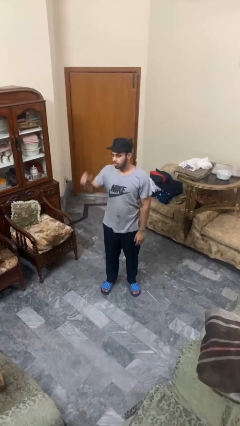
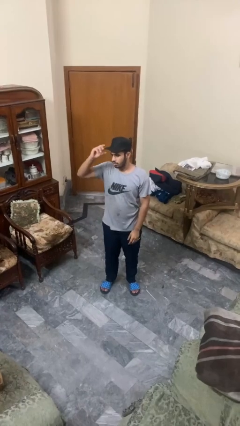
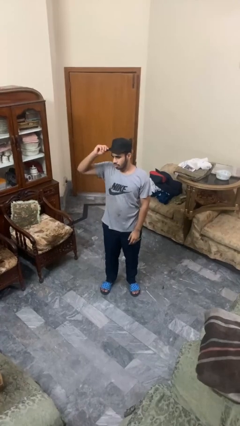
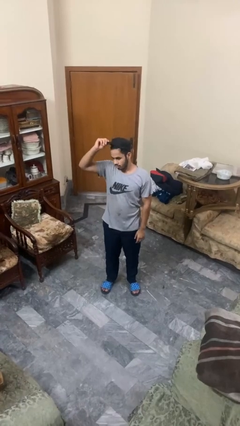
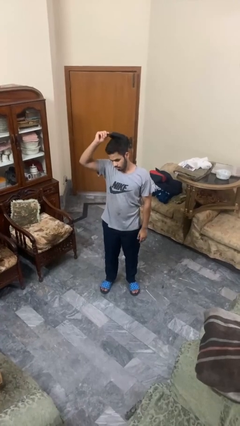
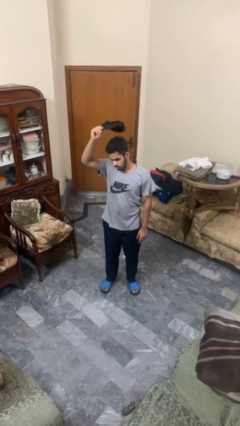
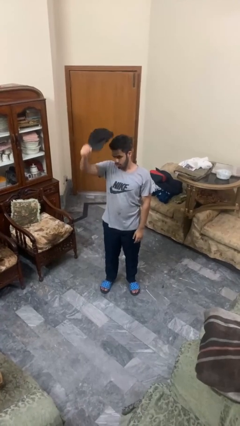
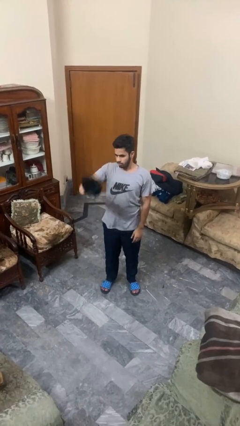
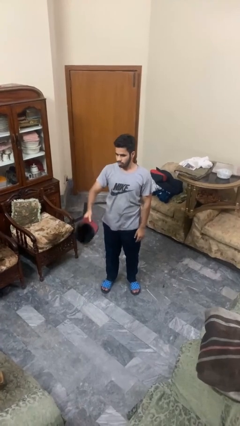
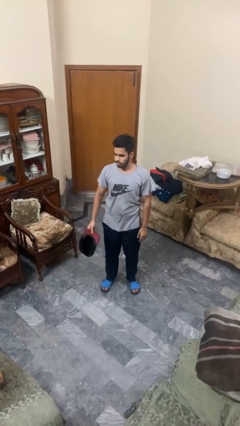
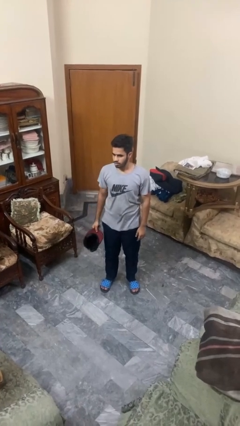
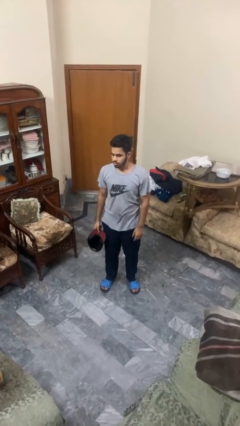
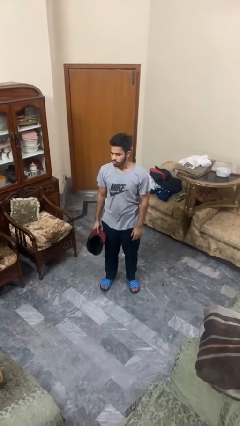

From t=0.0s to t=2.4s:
person takes off hat

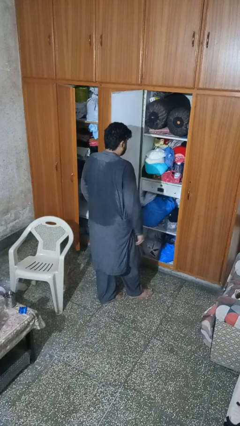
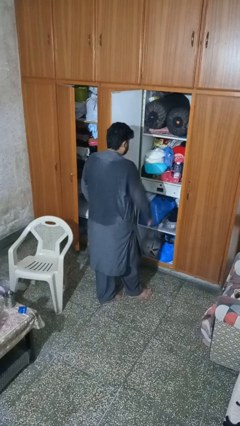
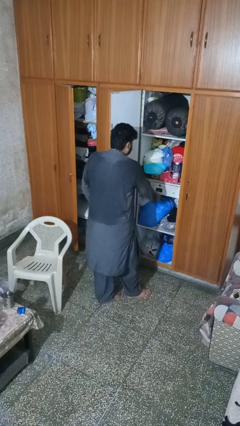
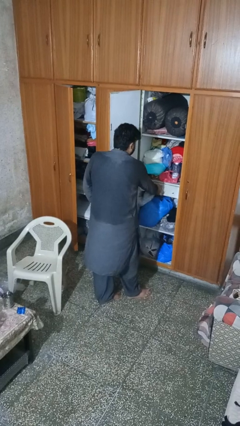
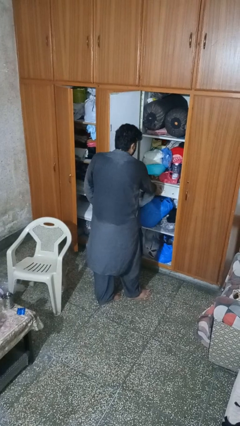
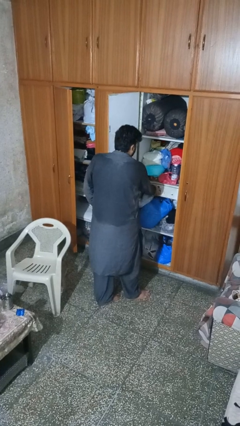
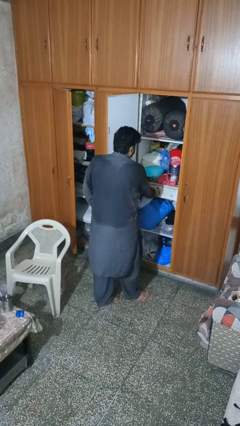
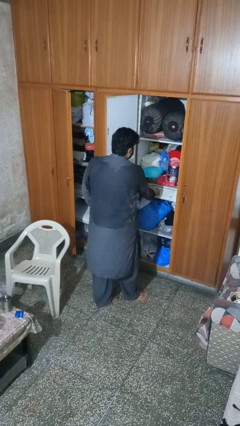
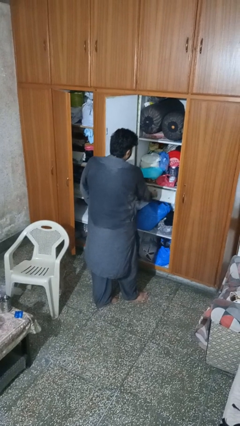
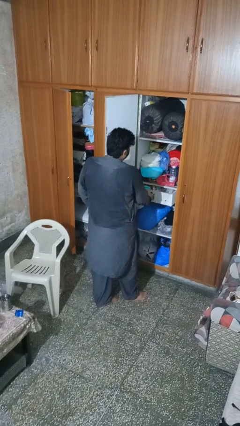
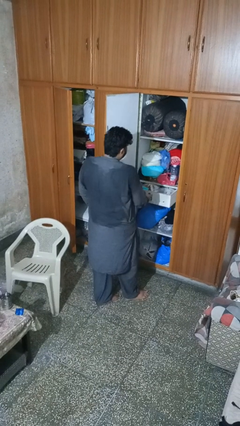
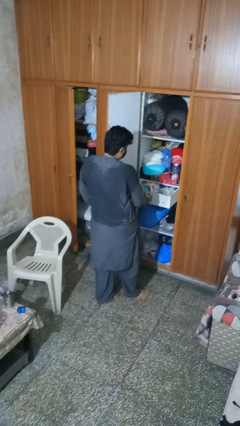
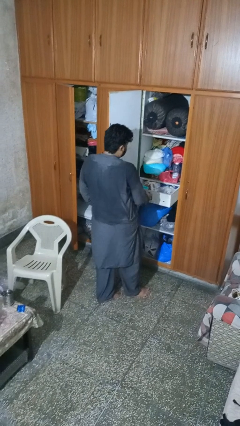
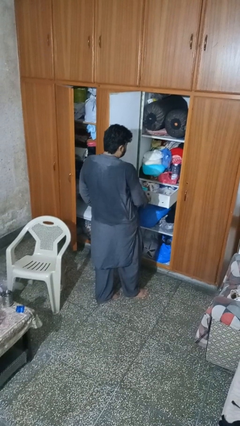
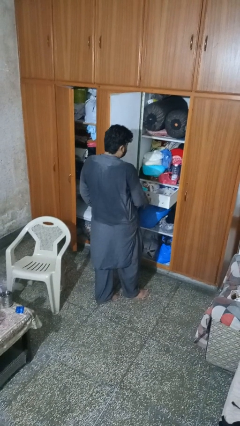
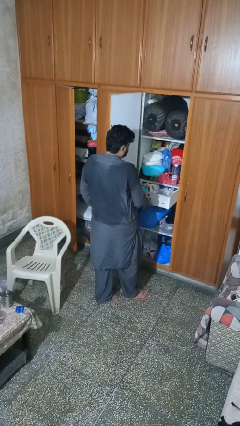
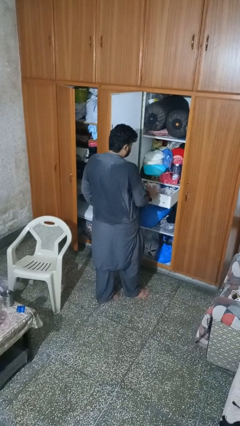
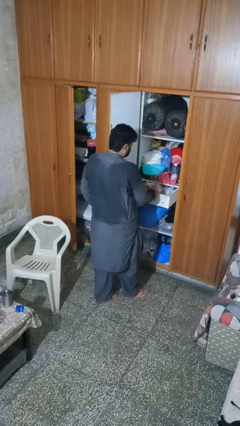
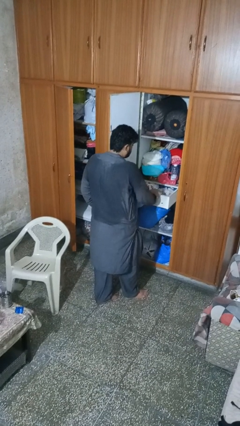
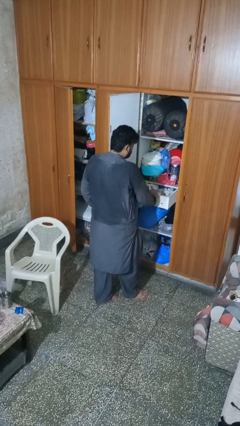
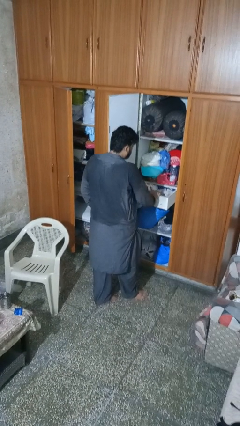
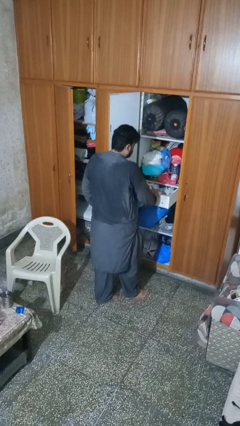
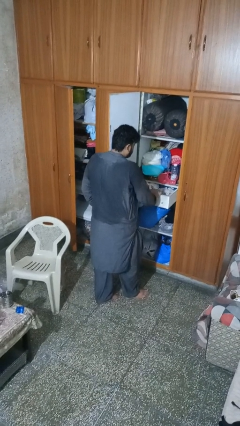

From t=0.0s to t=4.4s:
person opens dresser drawer

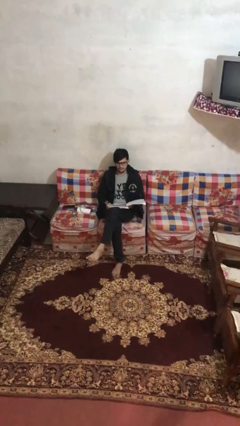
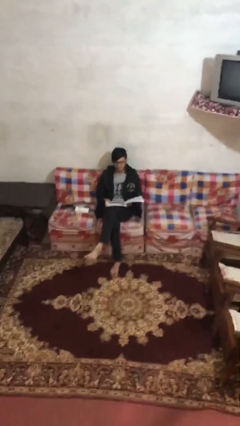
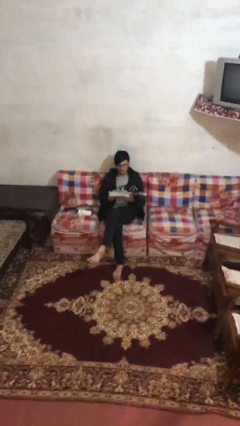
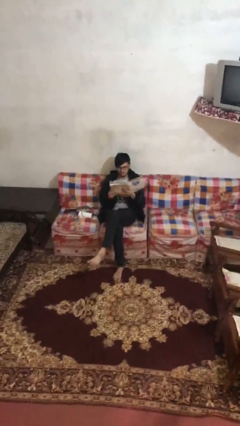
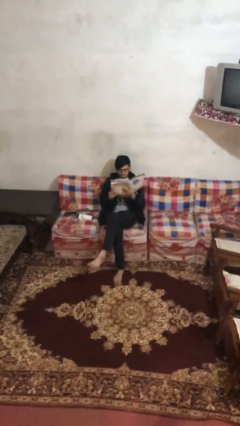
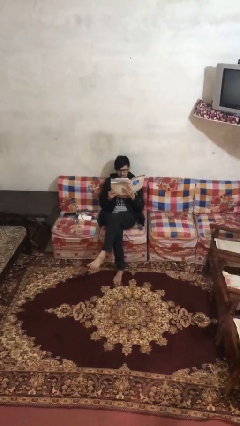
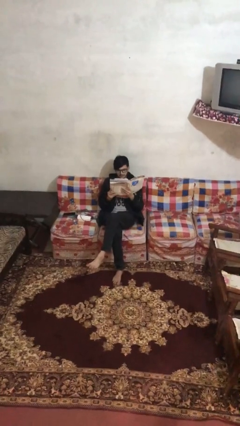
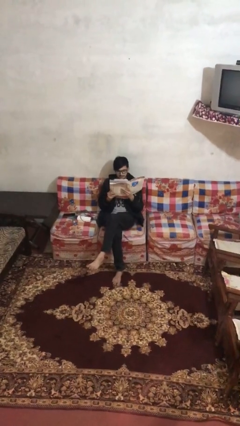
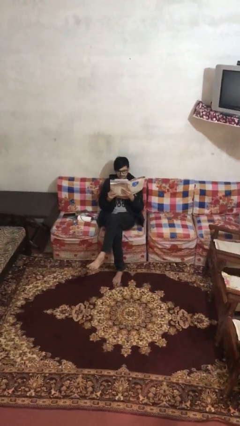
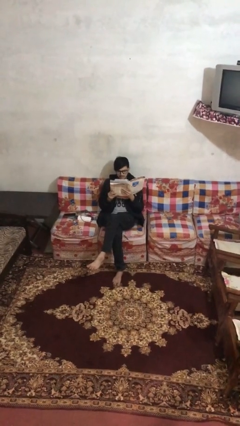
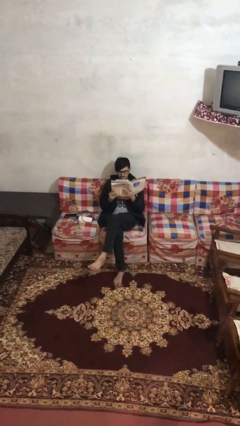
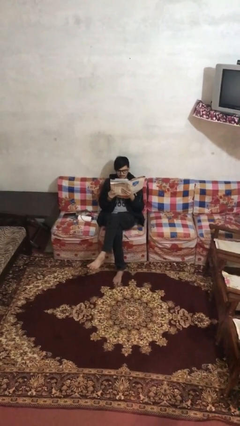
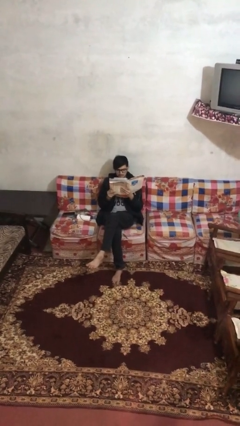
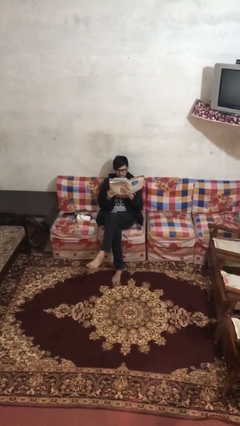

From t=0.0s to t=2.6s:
person reads document

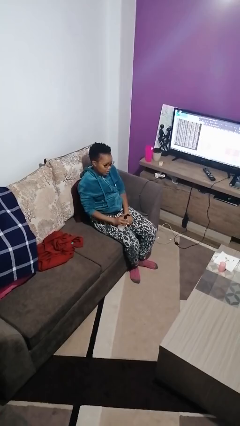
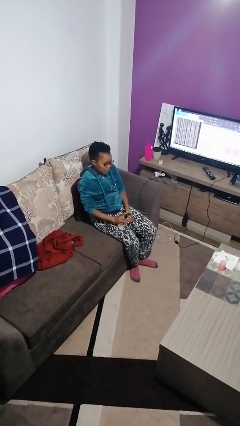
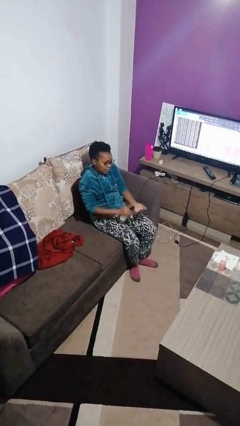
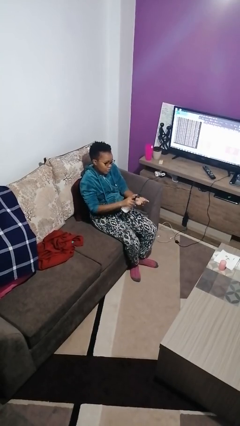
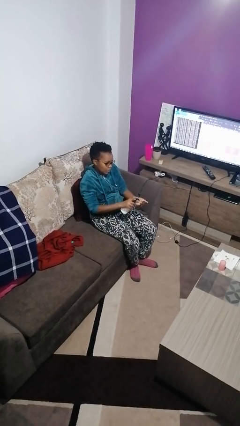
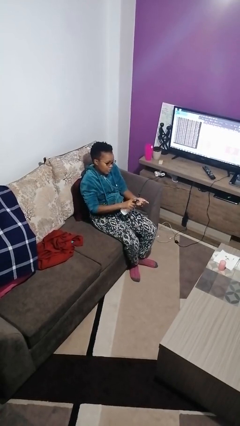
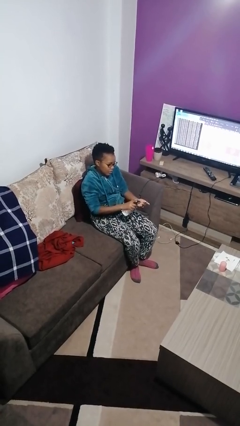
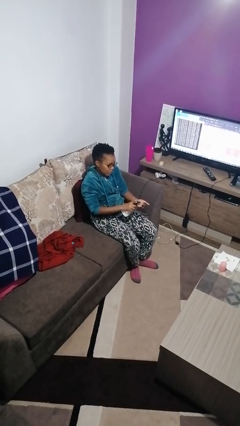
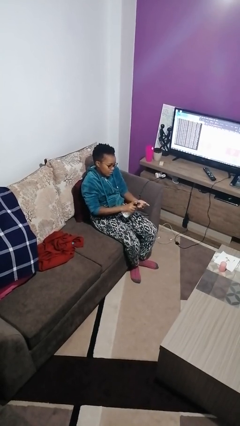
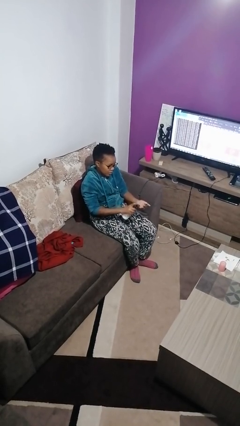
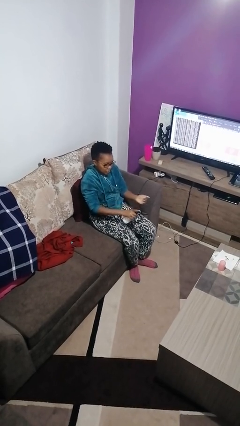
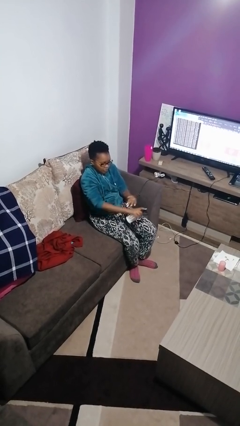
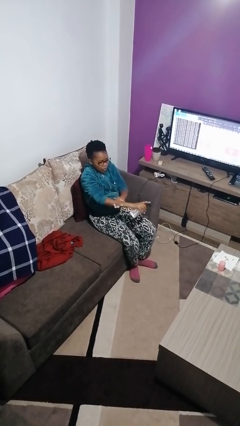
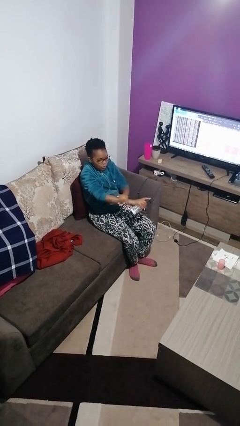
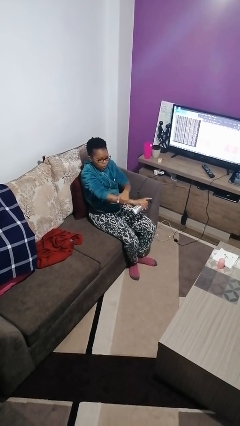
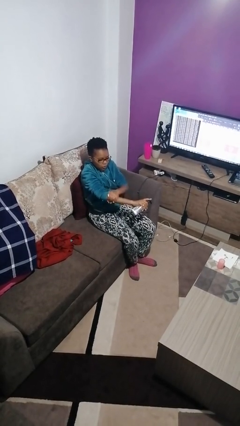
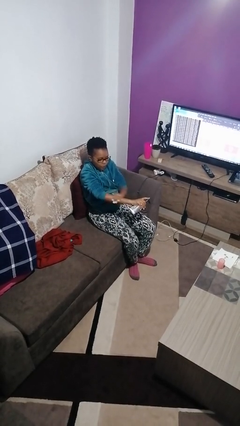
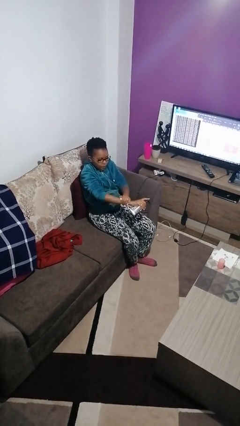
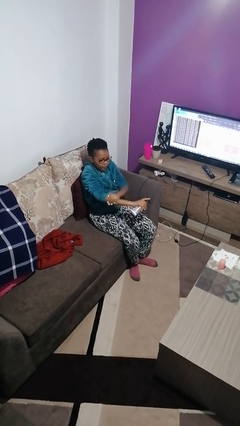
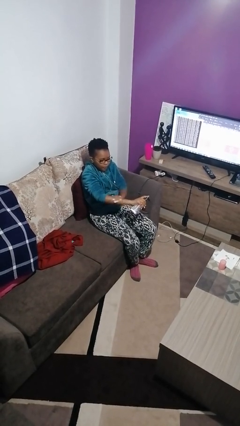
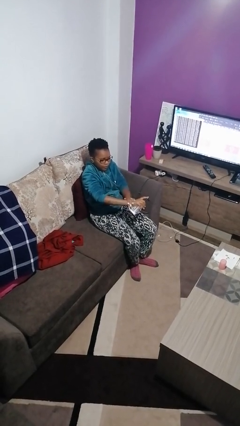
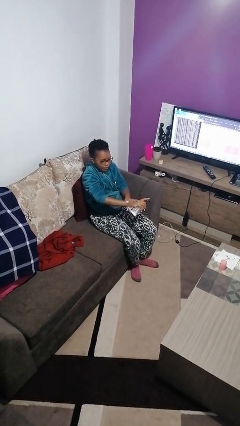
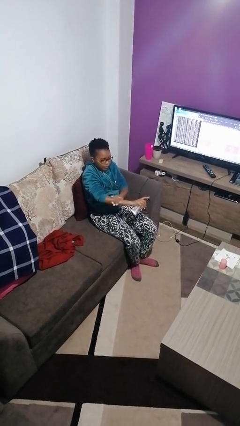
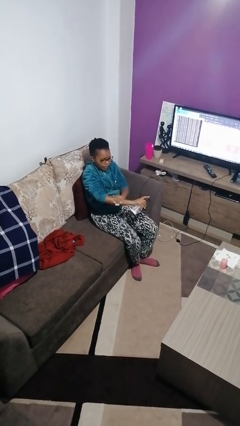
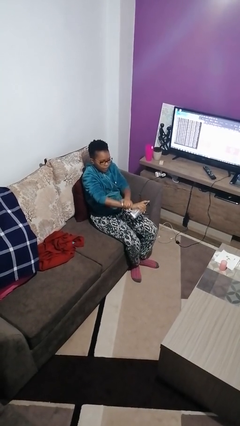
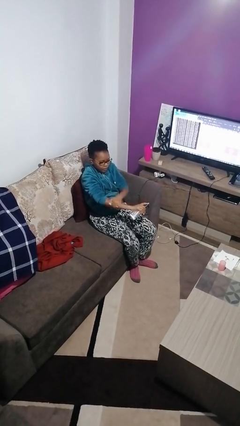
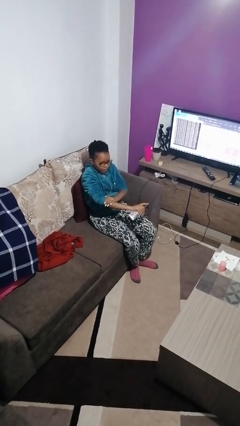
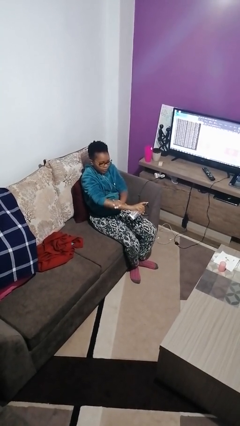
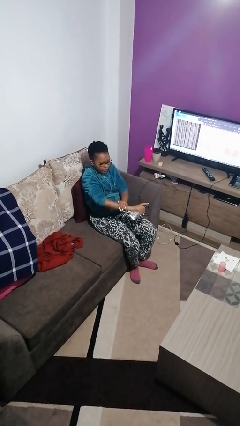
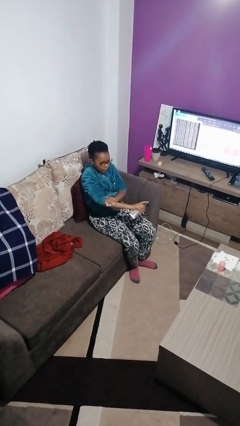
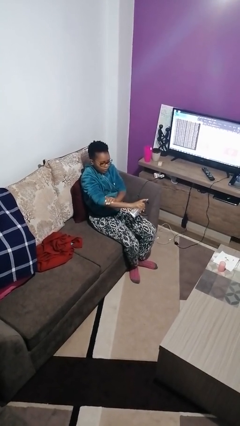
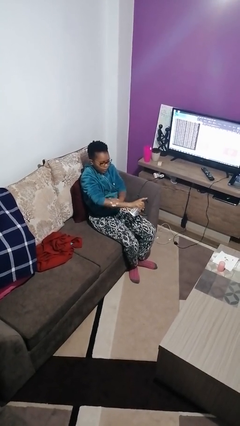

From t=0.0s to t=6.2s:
person applies sunscreen

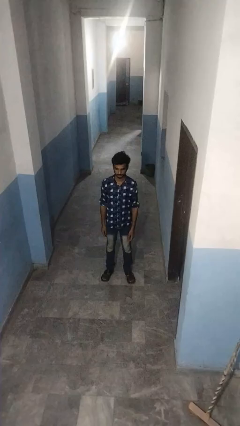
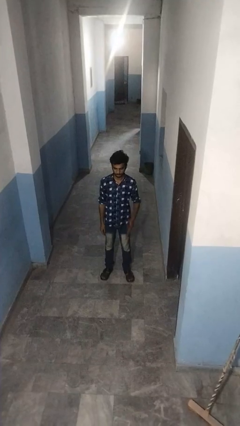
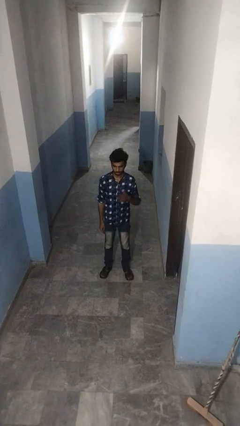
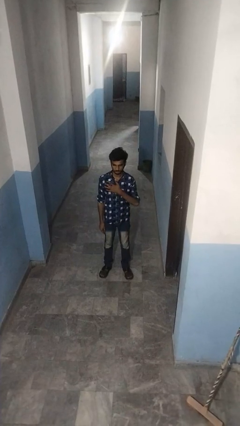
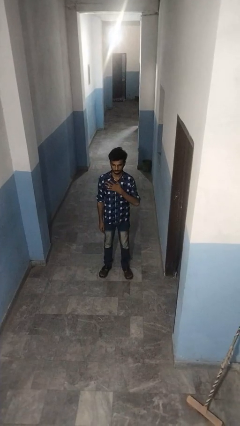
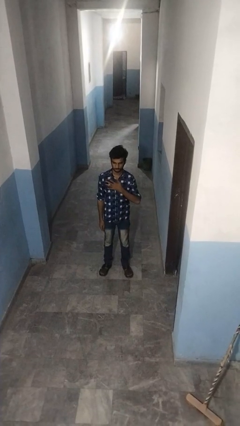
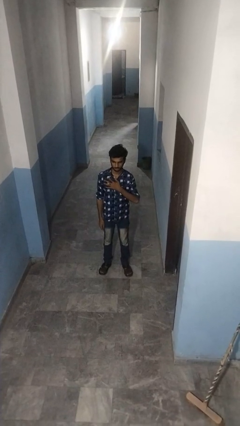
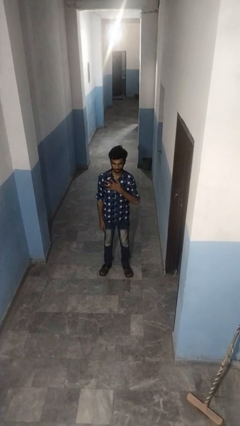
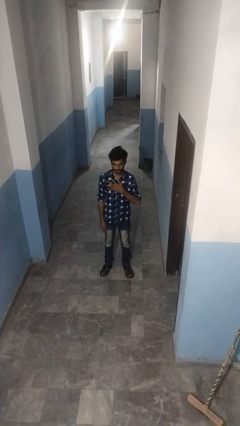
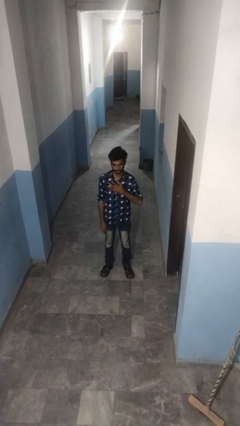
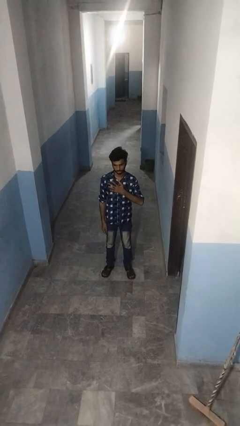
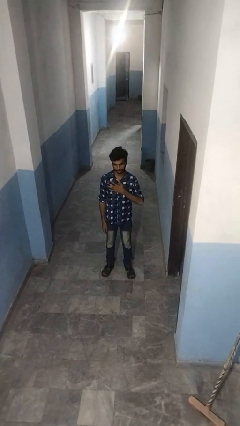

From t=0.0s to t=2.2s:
person drums on chest
